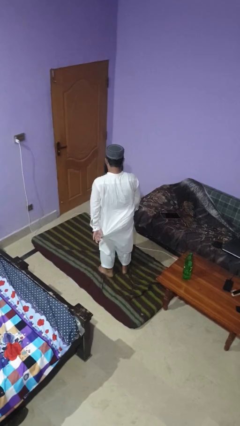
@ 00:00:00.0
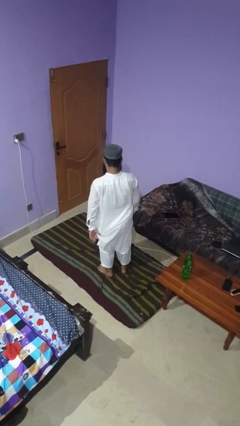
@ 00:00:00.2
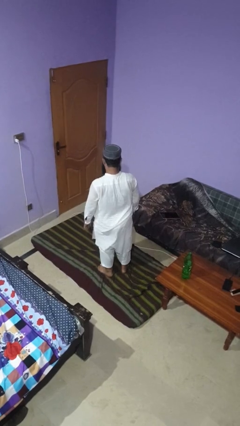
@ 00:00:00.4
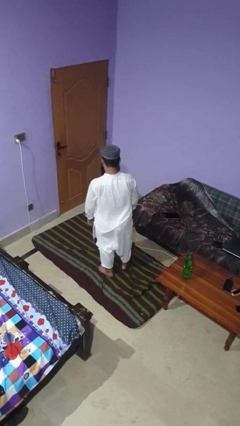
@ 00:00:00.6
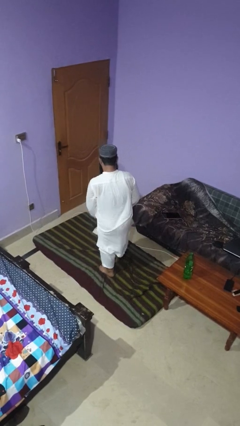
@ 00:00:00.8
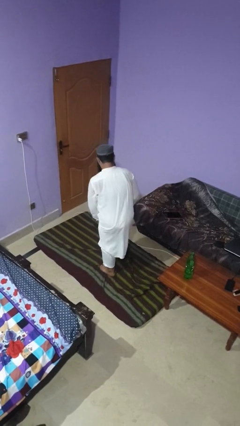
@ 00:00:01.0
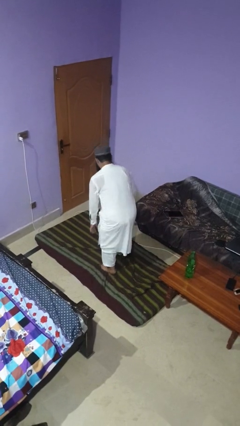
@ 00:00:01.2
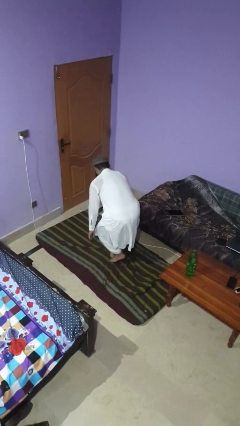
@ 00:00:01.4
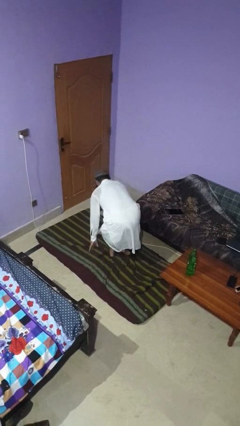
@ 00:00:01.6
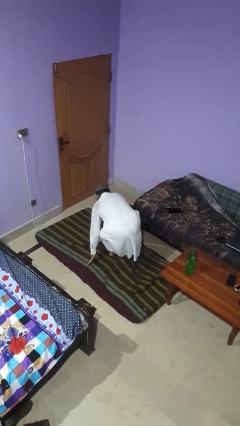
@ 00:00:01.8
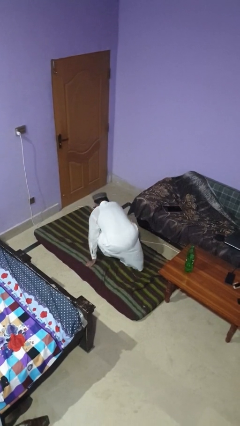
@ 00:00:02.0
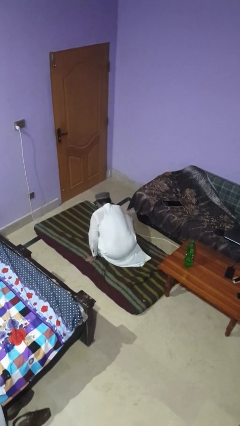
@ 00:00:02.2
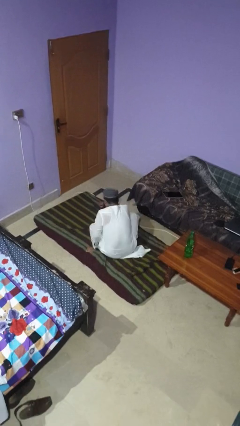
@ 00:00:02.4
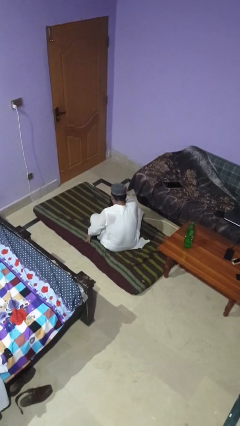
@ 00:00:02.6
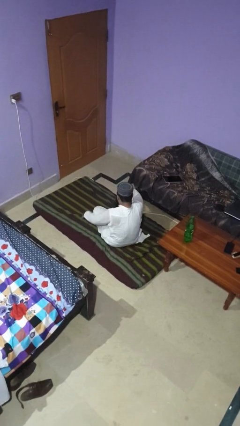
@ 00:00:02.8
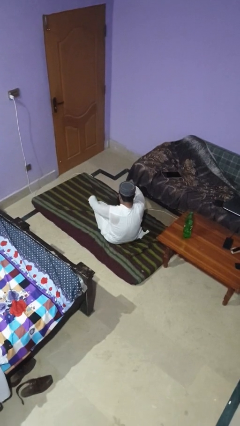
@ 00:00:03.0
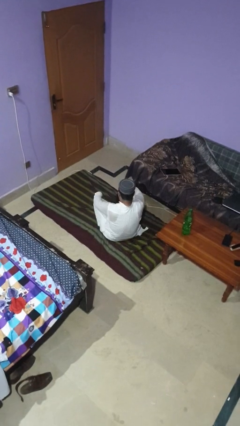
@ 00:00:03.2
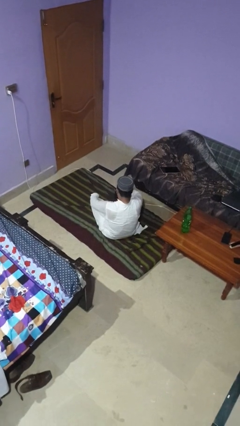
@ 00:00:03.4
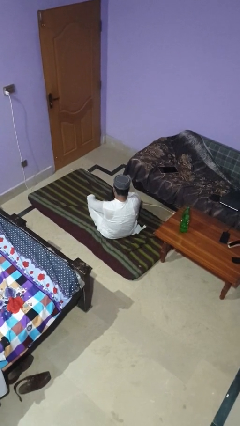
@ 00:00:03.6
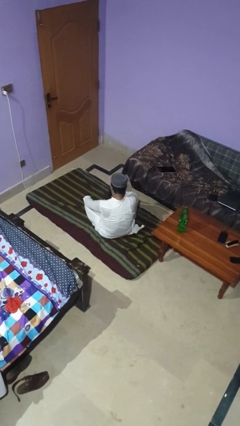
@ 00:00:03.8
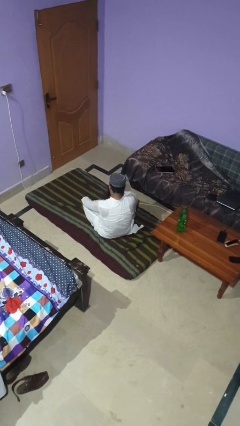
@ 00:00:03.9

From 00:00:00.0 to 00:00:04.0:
person sits crisscross

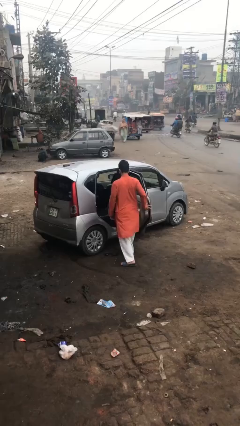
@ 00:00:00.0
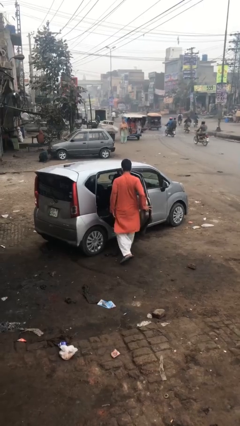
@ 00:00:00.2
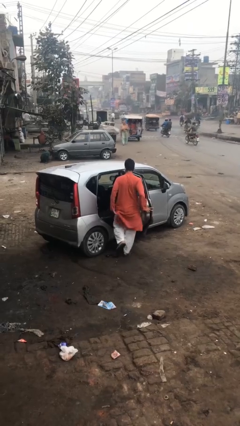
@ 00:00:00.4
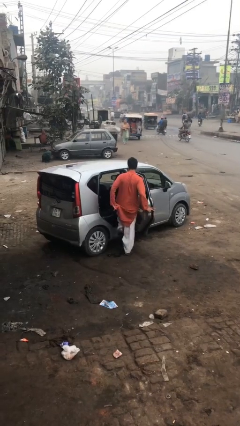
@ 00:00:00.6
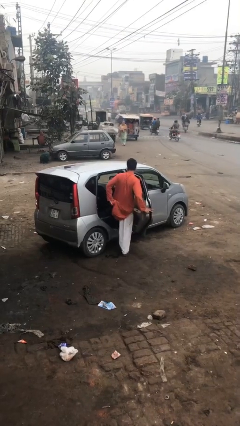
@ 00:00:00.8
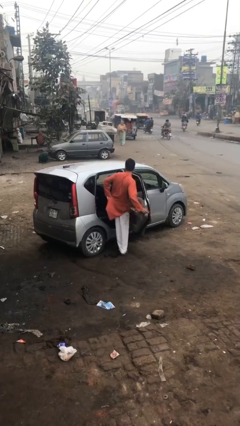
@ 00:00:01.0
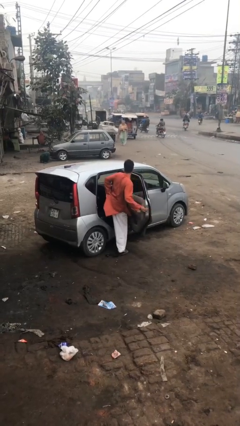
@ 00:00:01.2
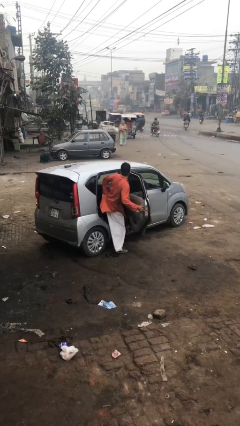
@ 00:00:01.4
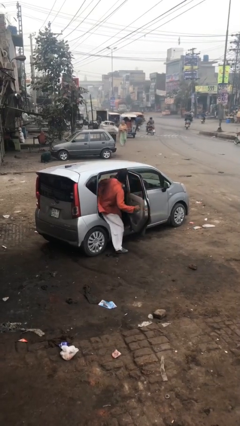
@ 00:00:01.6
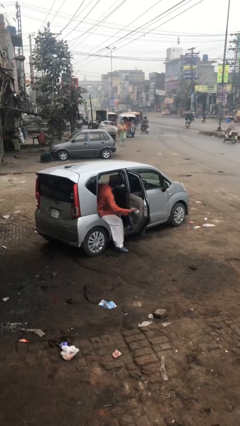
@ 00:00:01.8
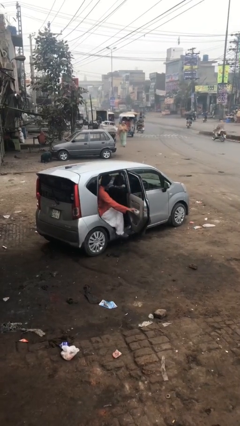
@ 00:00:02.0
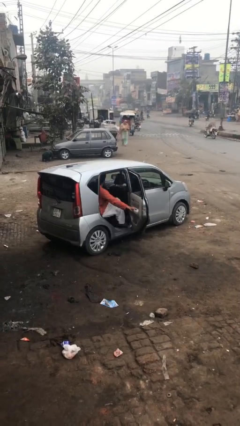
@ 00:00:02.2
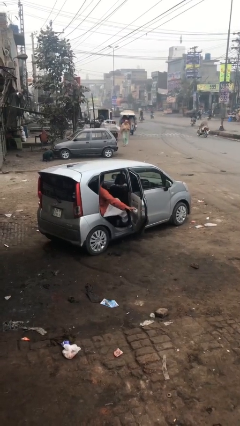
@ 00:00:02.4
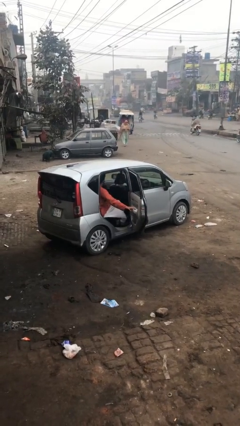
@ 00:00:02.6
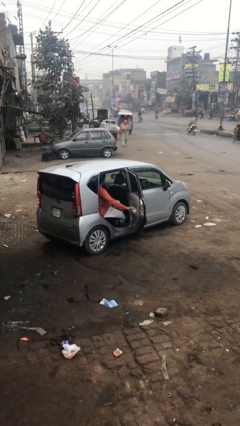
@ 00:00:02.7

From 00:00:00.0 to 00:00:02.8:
person enters car

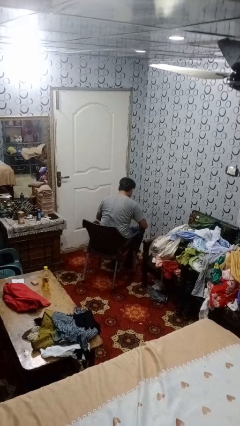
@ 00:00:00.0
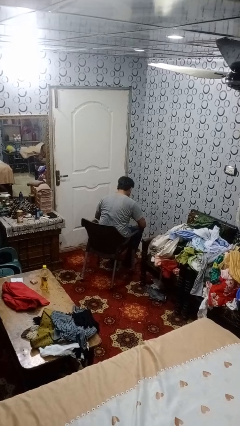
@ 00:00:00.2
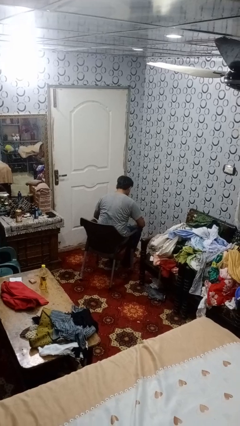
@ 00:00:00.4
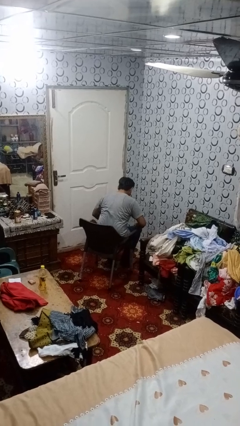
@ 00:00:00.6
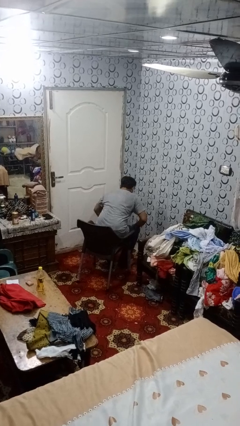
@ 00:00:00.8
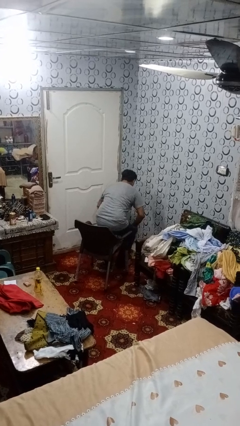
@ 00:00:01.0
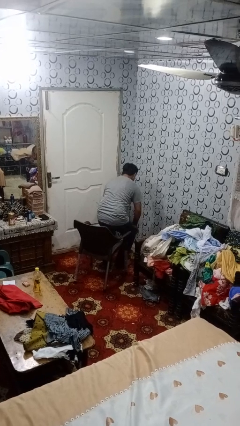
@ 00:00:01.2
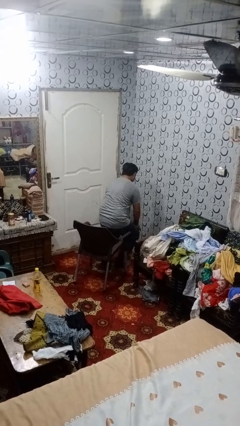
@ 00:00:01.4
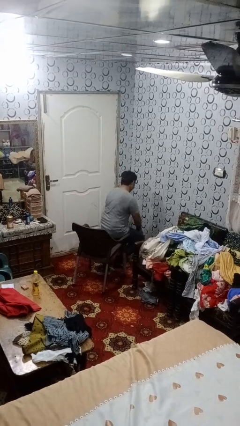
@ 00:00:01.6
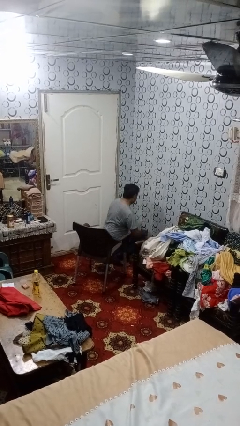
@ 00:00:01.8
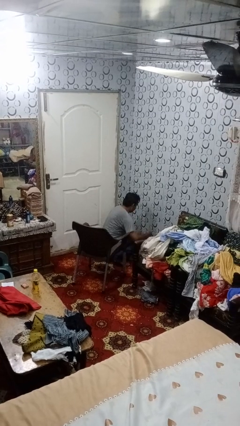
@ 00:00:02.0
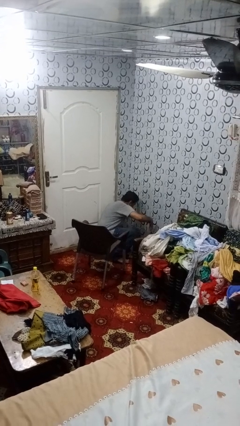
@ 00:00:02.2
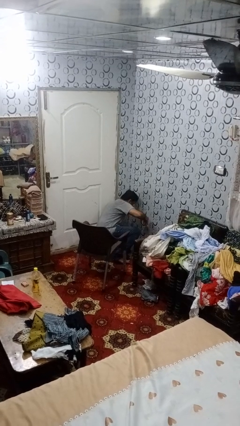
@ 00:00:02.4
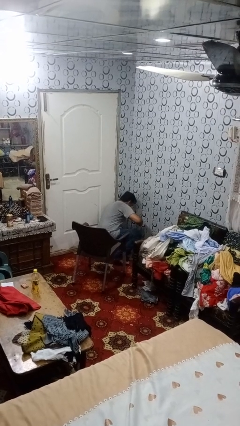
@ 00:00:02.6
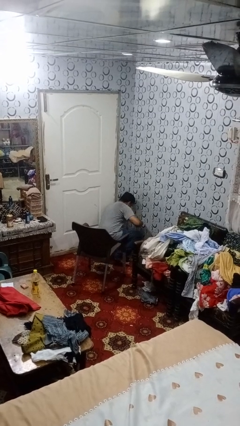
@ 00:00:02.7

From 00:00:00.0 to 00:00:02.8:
person falls from chair

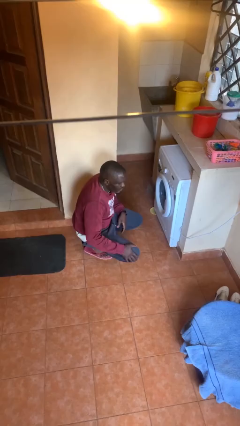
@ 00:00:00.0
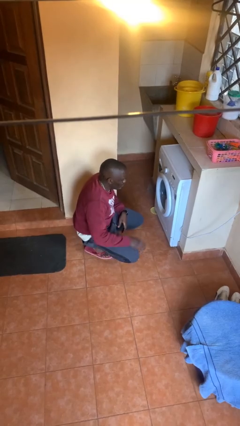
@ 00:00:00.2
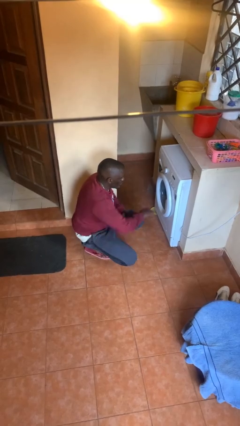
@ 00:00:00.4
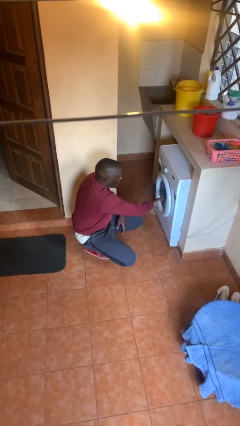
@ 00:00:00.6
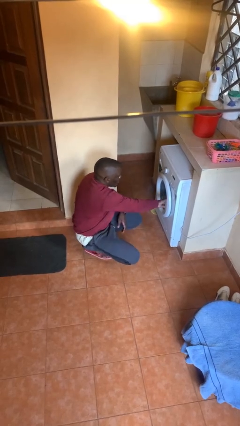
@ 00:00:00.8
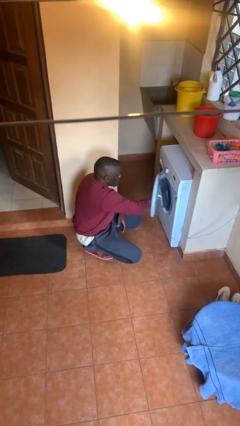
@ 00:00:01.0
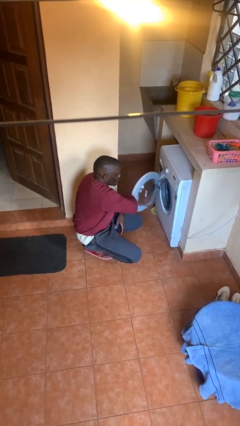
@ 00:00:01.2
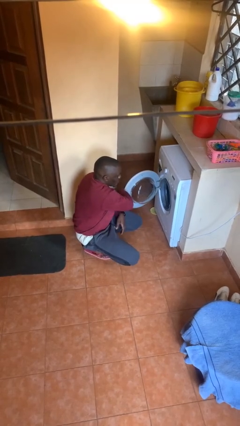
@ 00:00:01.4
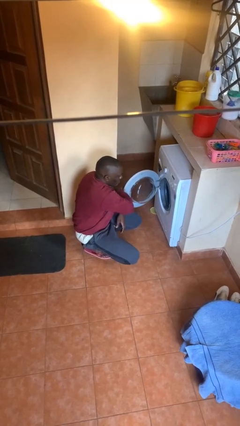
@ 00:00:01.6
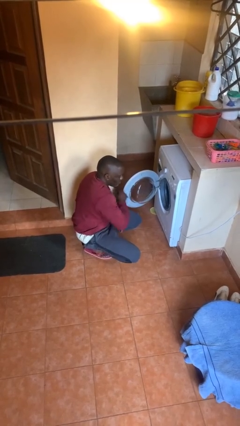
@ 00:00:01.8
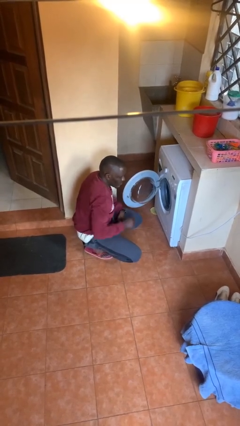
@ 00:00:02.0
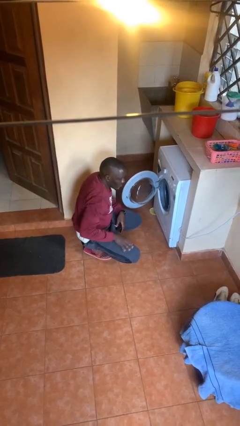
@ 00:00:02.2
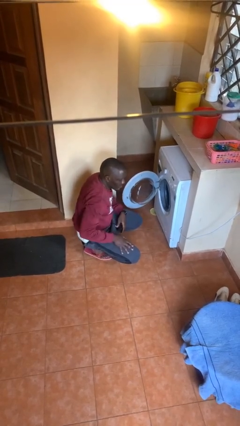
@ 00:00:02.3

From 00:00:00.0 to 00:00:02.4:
person opens clothes washer

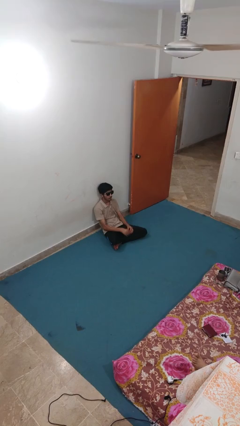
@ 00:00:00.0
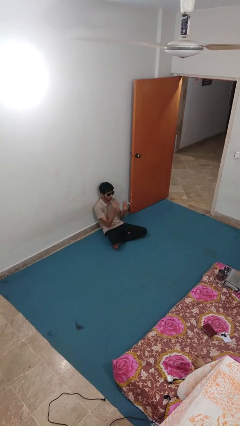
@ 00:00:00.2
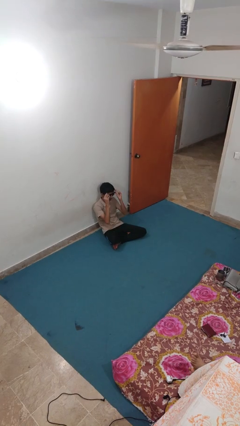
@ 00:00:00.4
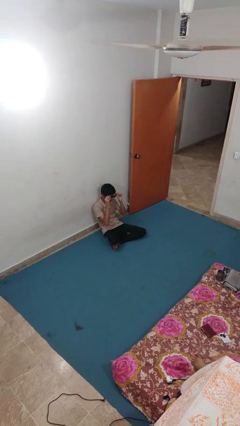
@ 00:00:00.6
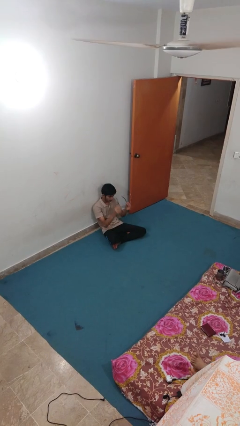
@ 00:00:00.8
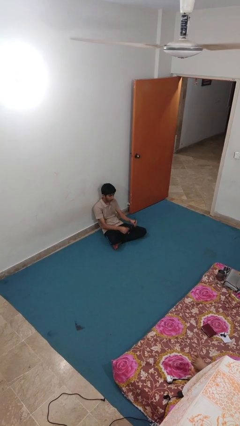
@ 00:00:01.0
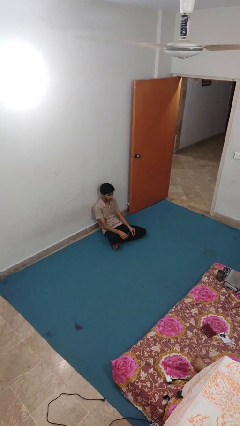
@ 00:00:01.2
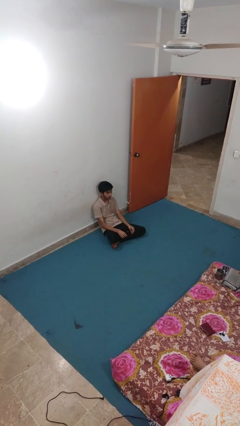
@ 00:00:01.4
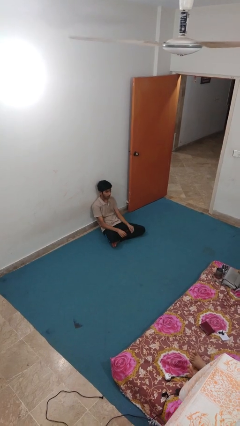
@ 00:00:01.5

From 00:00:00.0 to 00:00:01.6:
person takes off sunglasses

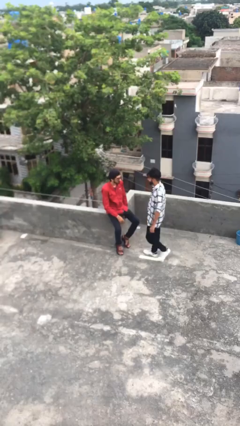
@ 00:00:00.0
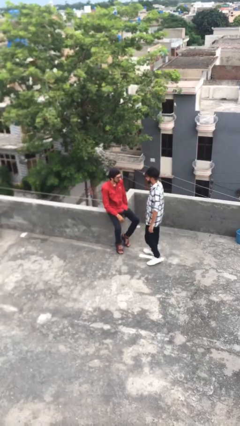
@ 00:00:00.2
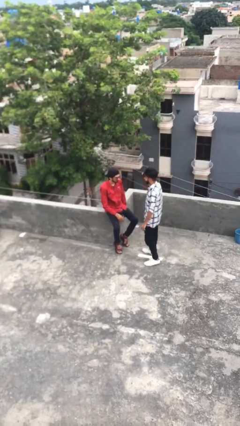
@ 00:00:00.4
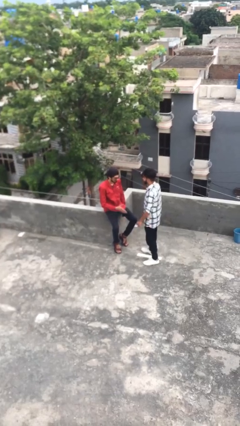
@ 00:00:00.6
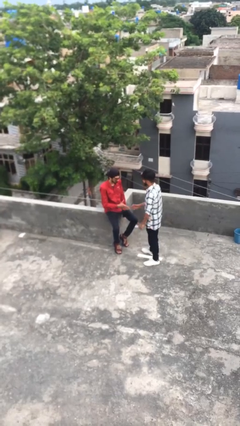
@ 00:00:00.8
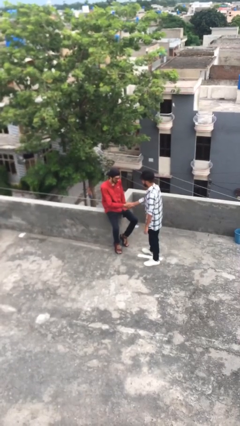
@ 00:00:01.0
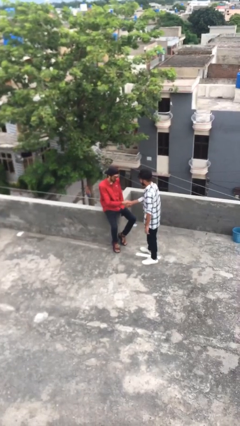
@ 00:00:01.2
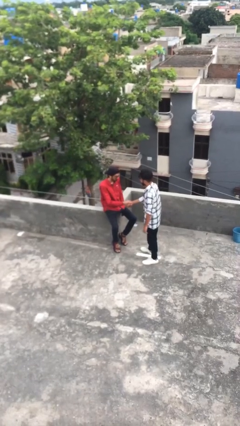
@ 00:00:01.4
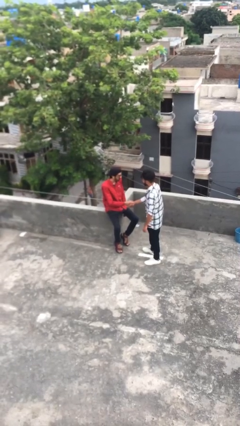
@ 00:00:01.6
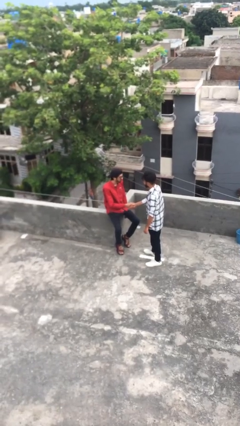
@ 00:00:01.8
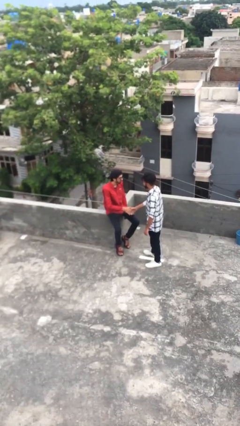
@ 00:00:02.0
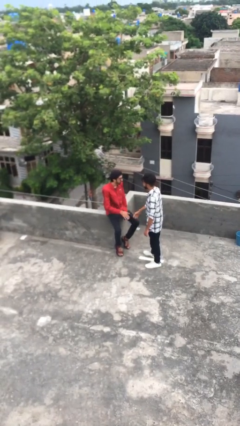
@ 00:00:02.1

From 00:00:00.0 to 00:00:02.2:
person shakes hand

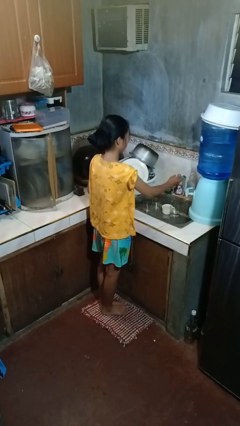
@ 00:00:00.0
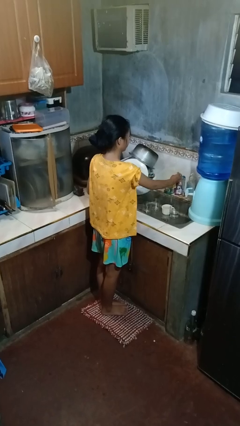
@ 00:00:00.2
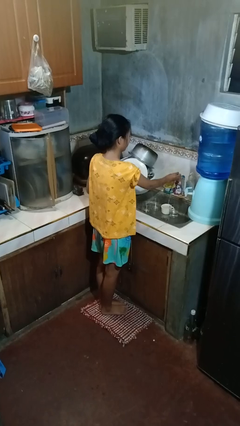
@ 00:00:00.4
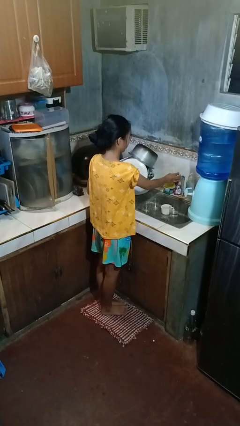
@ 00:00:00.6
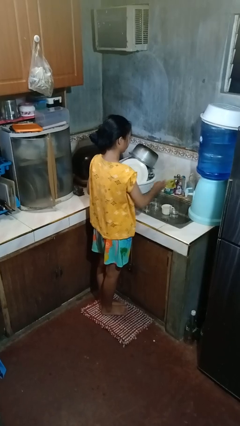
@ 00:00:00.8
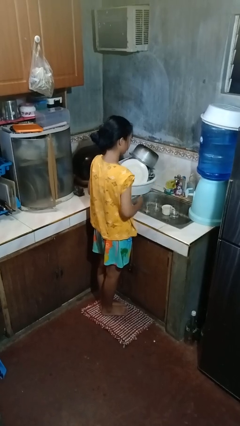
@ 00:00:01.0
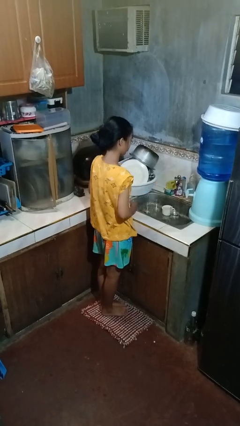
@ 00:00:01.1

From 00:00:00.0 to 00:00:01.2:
person turns off faucet
